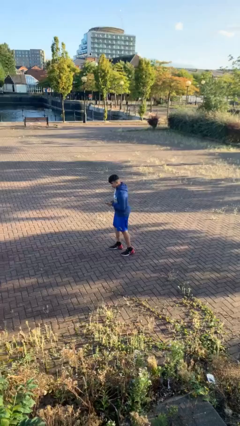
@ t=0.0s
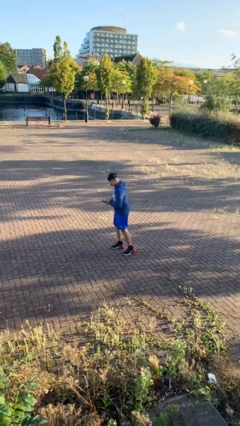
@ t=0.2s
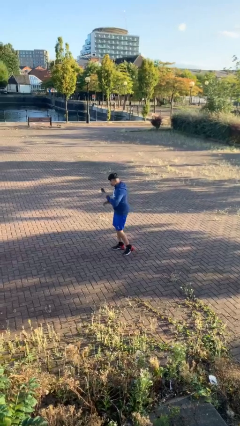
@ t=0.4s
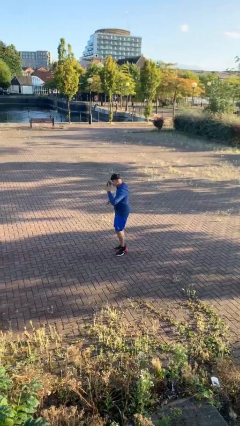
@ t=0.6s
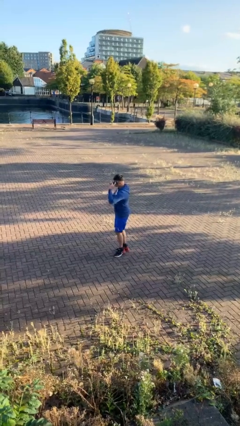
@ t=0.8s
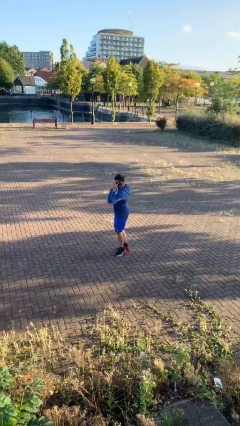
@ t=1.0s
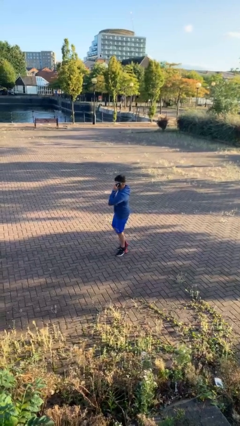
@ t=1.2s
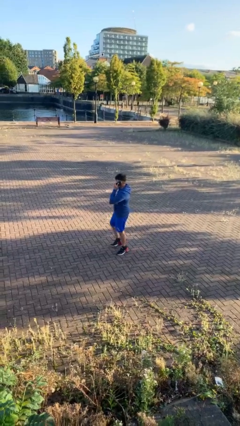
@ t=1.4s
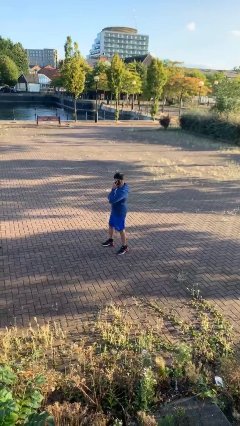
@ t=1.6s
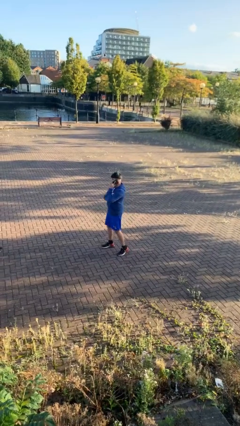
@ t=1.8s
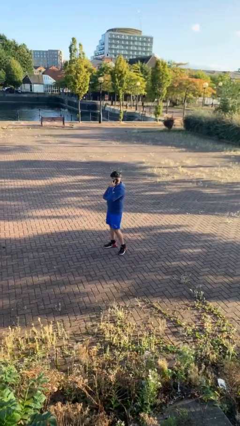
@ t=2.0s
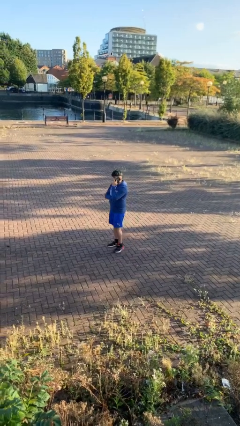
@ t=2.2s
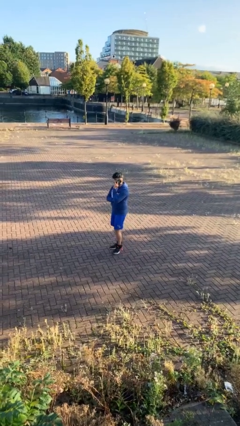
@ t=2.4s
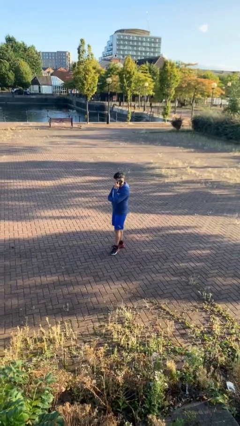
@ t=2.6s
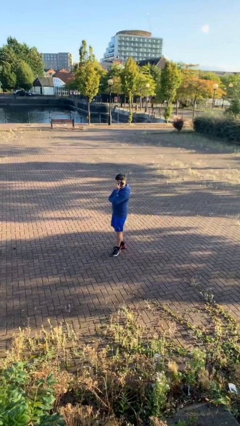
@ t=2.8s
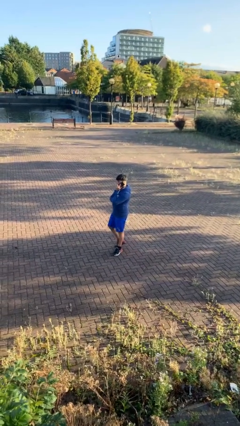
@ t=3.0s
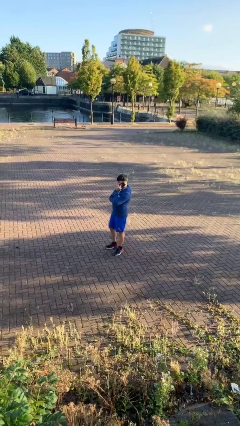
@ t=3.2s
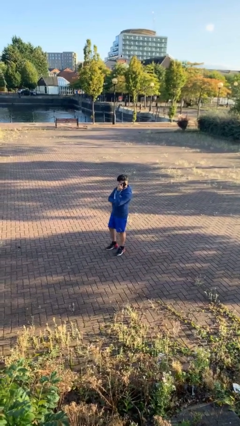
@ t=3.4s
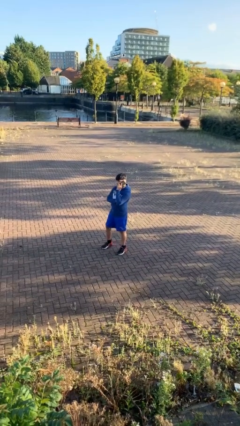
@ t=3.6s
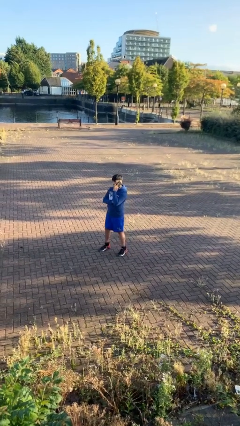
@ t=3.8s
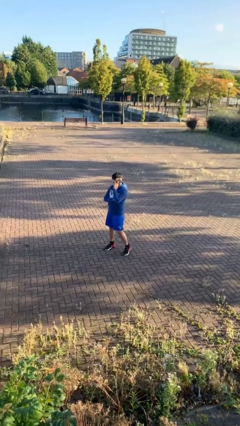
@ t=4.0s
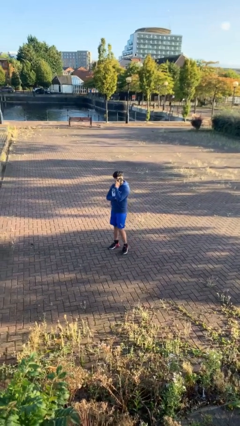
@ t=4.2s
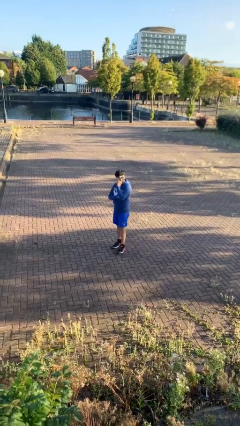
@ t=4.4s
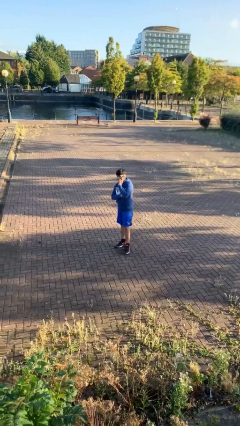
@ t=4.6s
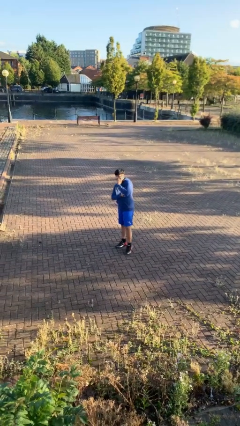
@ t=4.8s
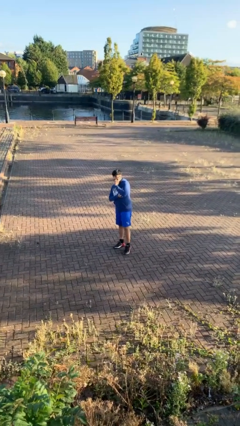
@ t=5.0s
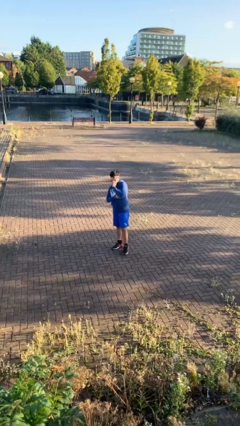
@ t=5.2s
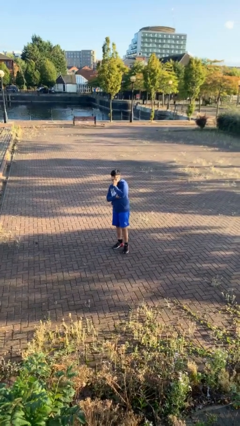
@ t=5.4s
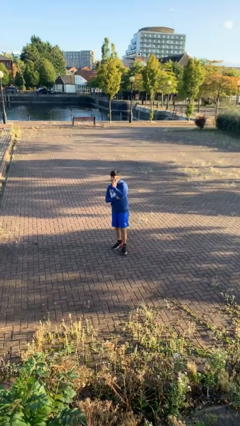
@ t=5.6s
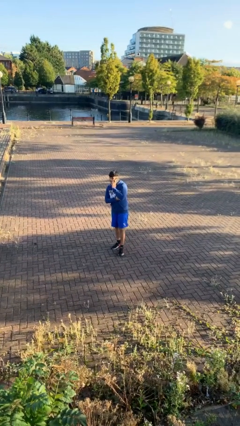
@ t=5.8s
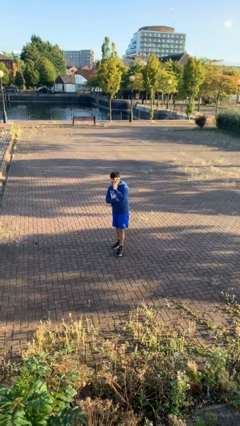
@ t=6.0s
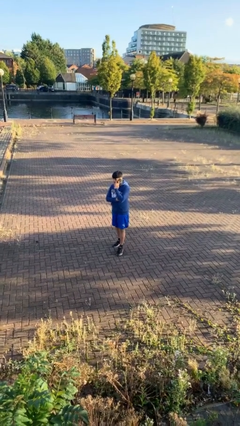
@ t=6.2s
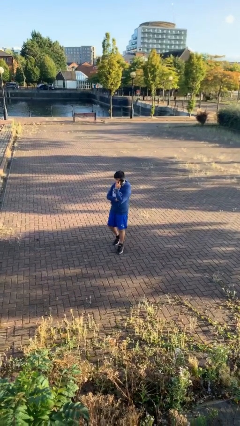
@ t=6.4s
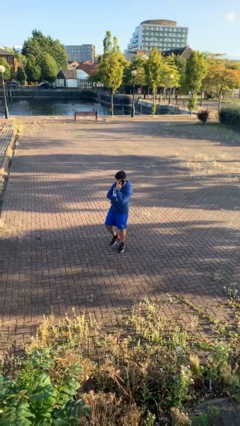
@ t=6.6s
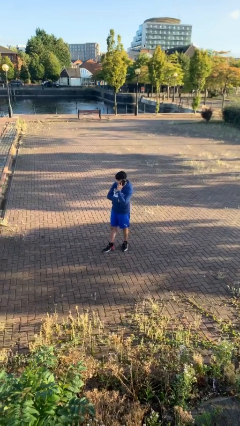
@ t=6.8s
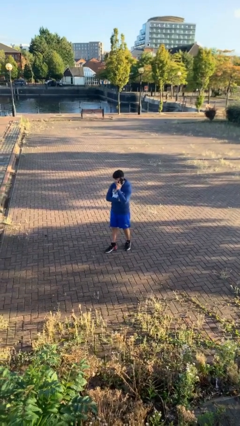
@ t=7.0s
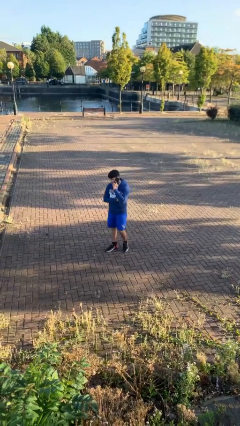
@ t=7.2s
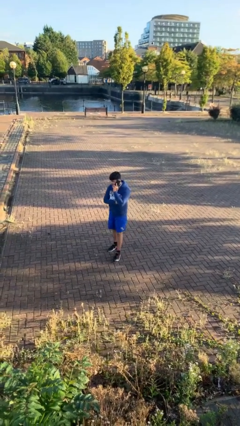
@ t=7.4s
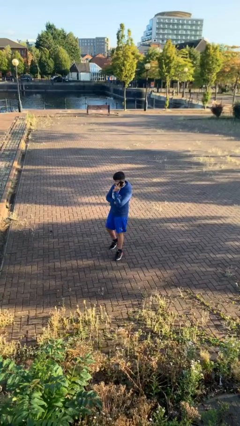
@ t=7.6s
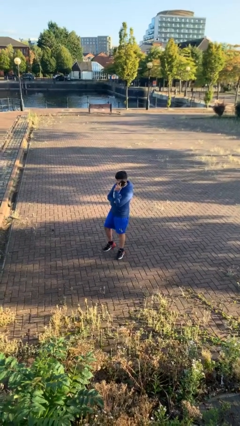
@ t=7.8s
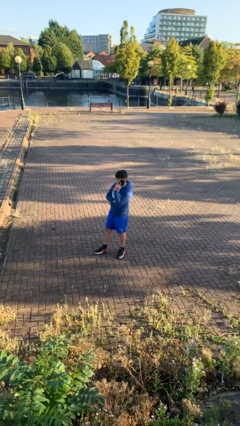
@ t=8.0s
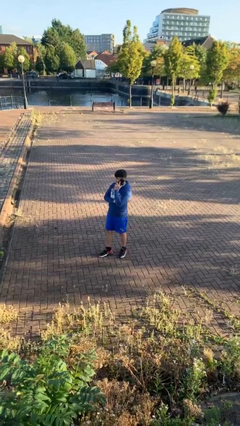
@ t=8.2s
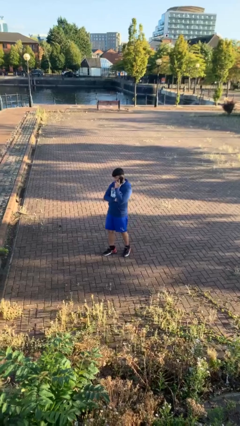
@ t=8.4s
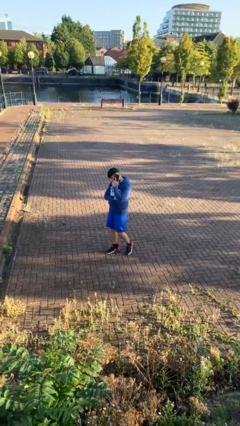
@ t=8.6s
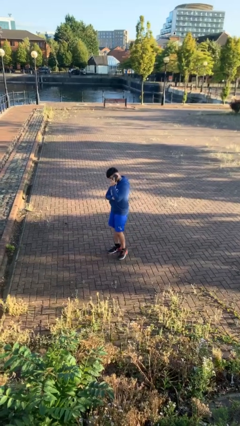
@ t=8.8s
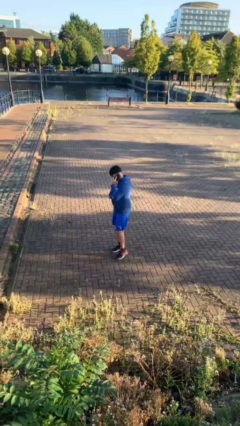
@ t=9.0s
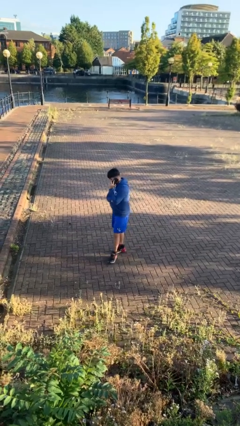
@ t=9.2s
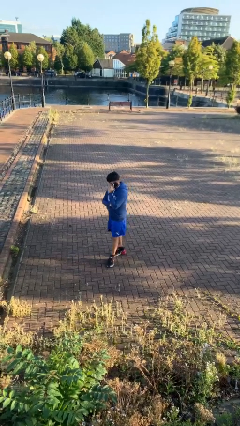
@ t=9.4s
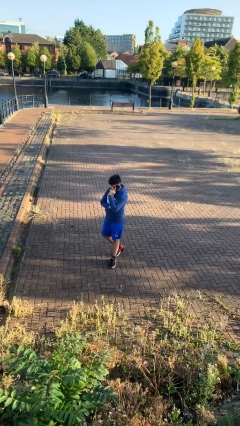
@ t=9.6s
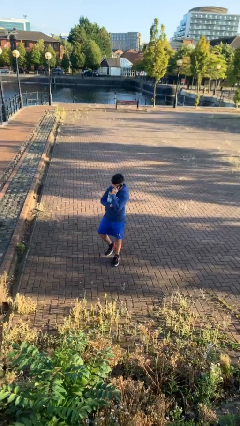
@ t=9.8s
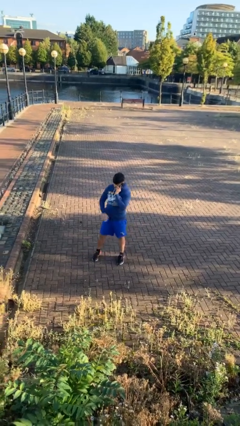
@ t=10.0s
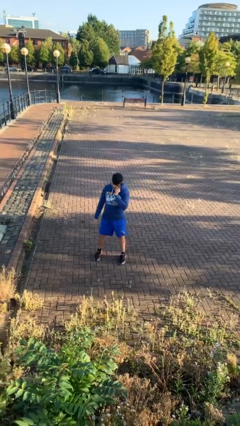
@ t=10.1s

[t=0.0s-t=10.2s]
person talks on phone

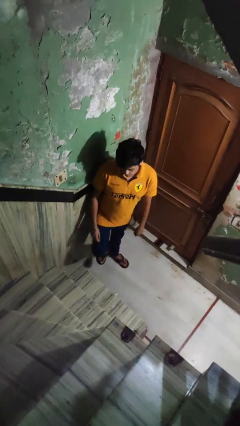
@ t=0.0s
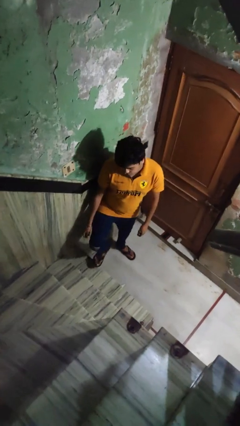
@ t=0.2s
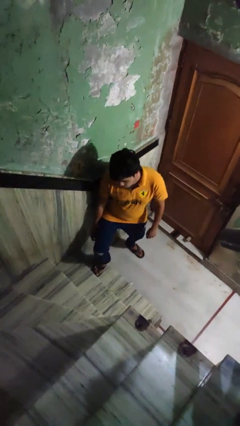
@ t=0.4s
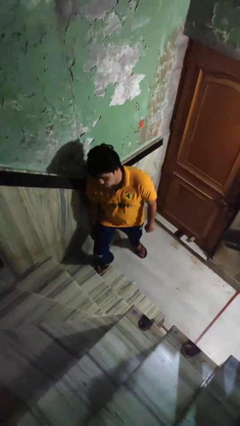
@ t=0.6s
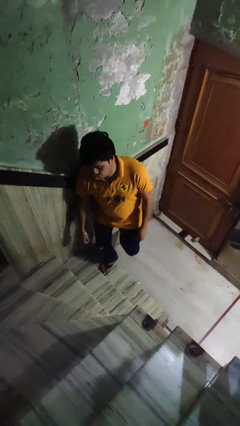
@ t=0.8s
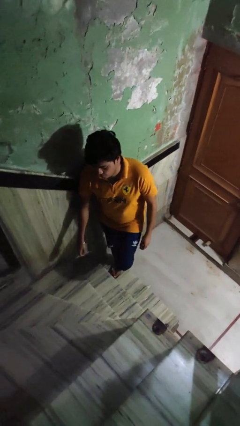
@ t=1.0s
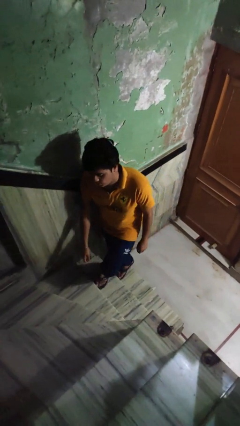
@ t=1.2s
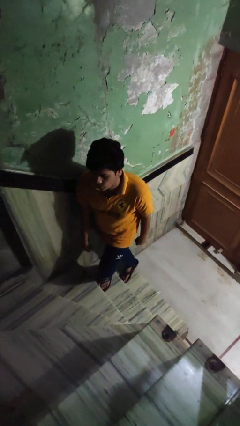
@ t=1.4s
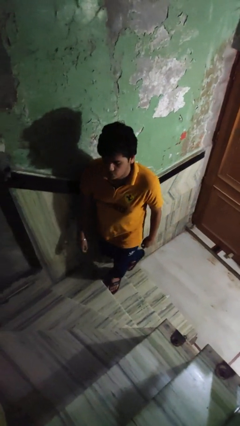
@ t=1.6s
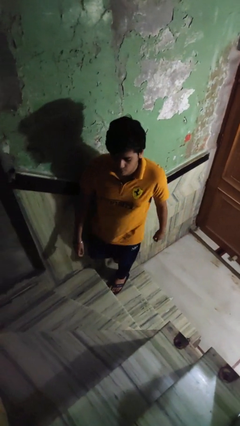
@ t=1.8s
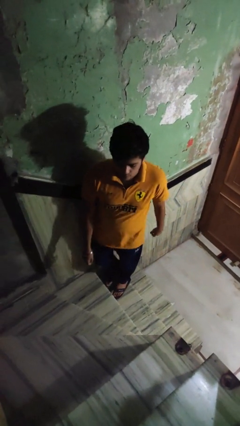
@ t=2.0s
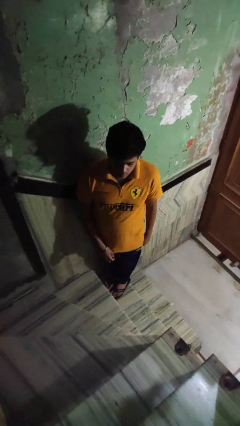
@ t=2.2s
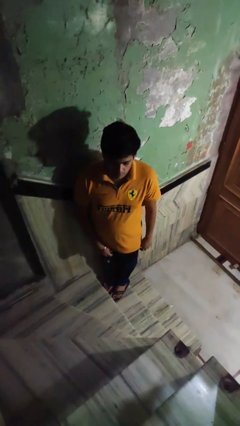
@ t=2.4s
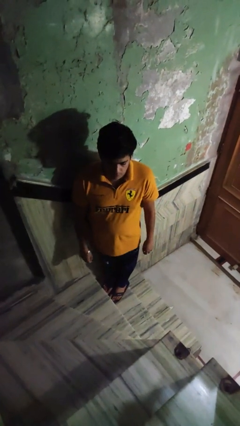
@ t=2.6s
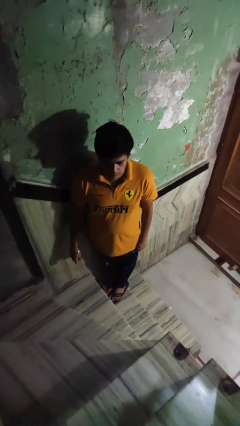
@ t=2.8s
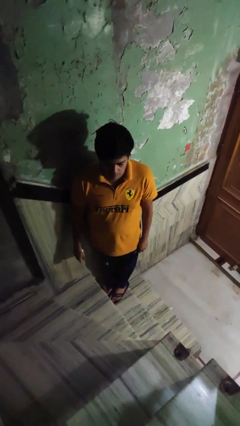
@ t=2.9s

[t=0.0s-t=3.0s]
person climbs up stairs

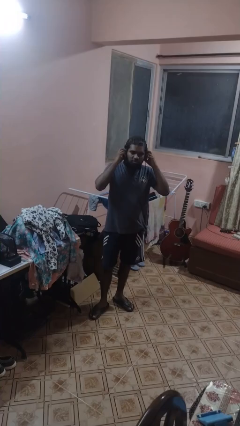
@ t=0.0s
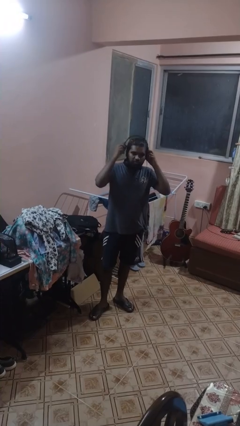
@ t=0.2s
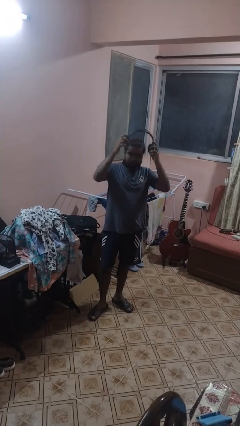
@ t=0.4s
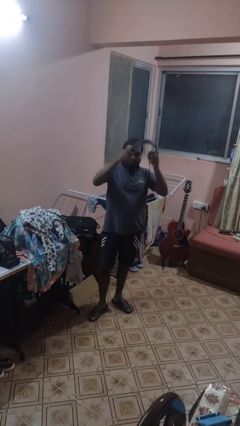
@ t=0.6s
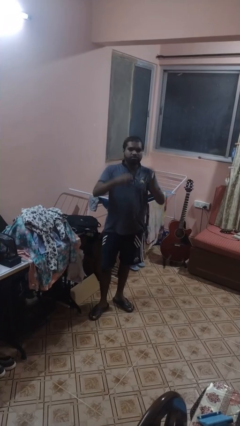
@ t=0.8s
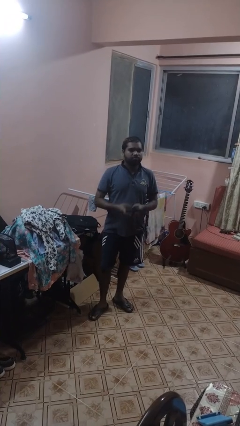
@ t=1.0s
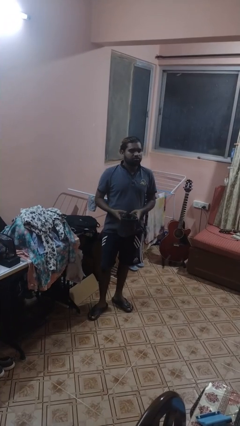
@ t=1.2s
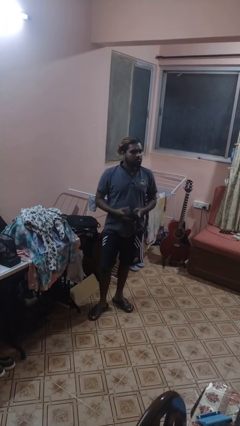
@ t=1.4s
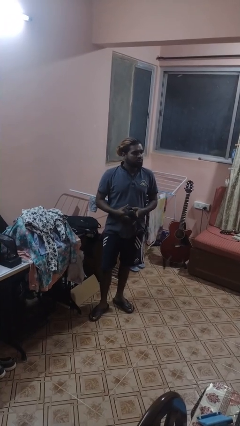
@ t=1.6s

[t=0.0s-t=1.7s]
person takes off headphones

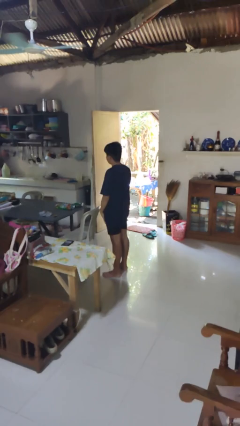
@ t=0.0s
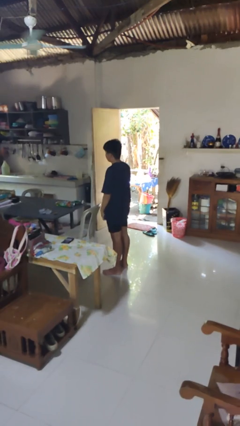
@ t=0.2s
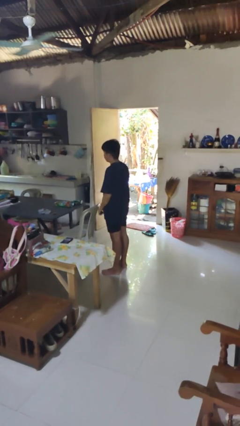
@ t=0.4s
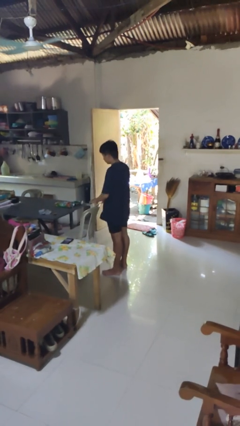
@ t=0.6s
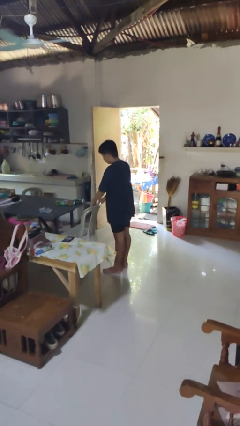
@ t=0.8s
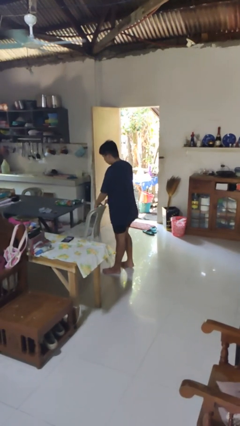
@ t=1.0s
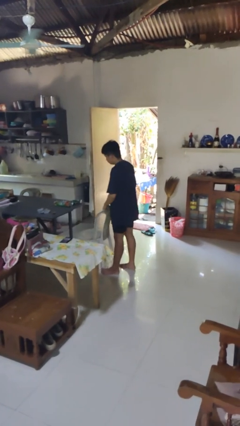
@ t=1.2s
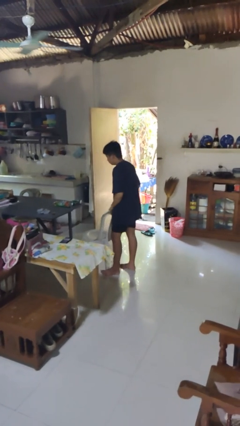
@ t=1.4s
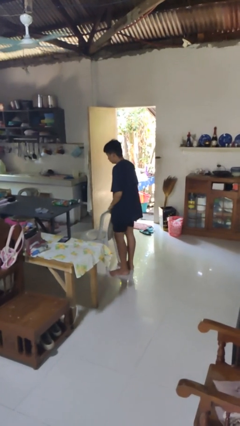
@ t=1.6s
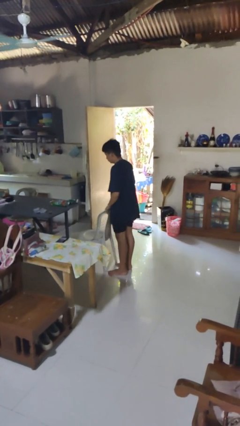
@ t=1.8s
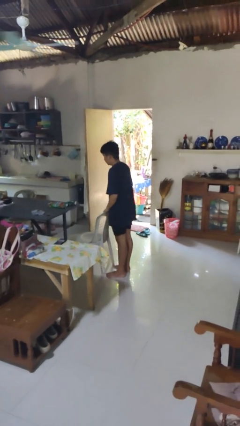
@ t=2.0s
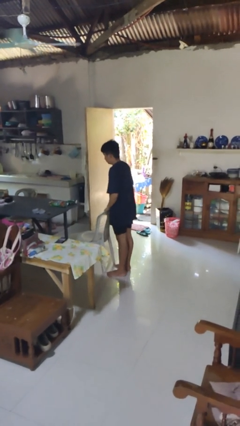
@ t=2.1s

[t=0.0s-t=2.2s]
person pulls out chair

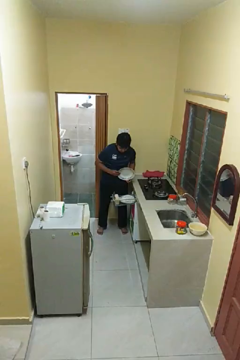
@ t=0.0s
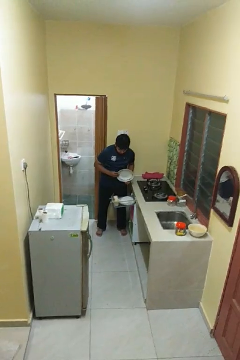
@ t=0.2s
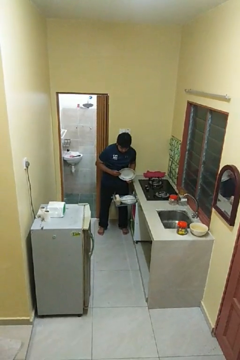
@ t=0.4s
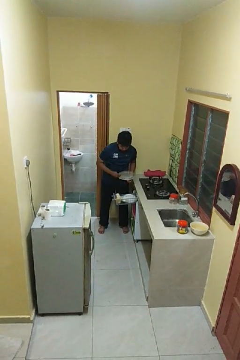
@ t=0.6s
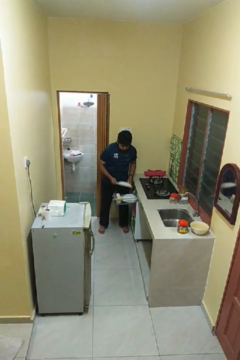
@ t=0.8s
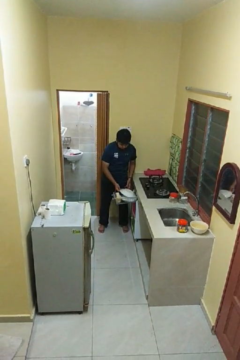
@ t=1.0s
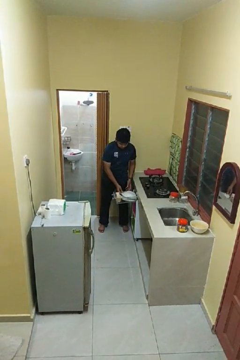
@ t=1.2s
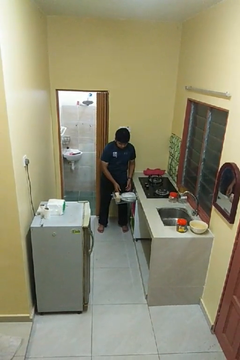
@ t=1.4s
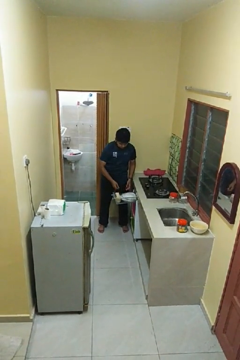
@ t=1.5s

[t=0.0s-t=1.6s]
person puts object into kitchen drawer
